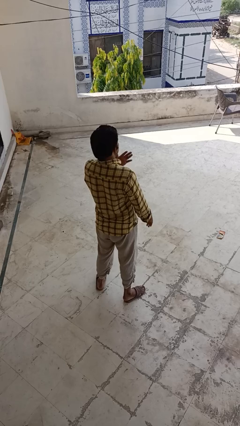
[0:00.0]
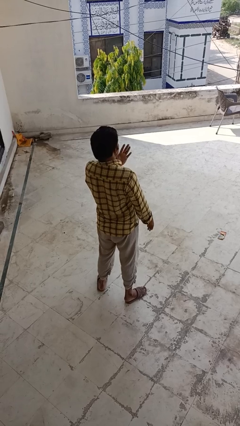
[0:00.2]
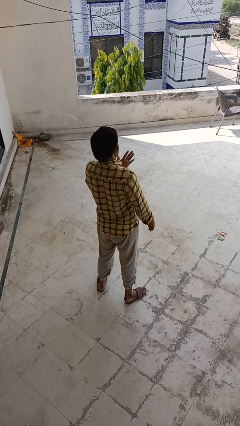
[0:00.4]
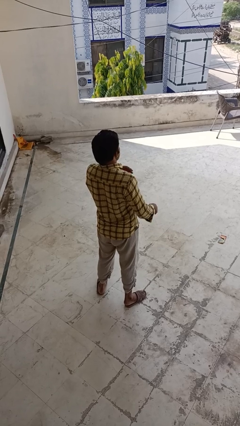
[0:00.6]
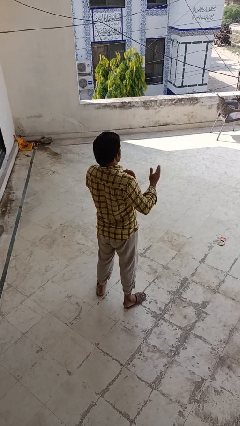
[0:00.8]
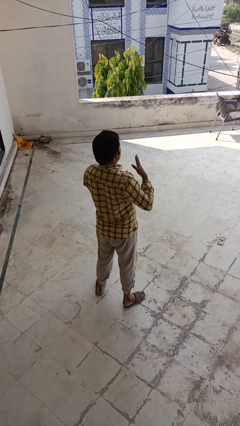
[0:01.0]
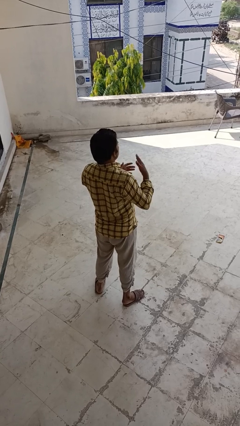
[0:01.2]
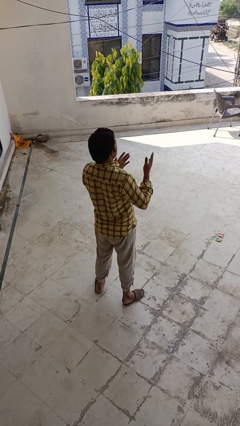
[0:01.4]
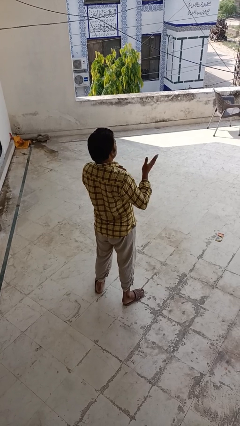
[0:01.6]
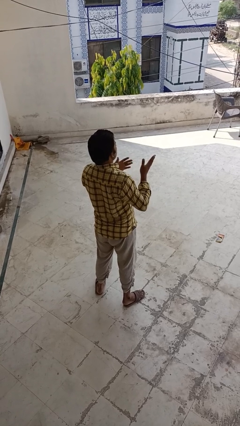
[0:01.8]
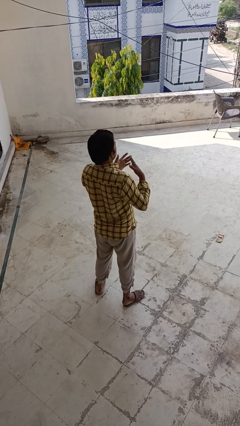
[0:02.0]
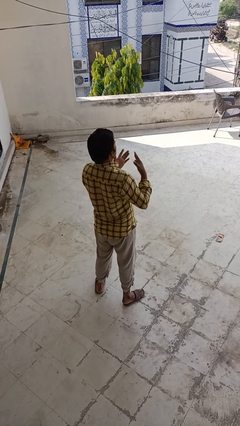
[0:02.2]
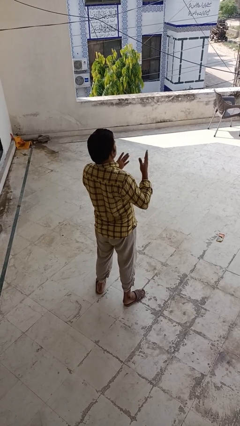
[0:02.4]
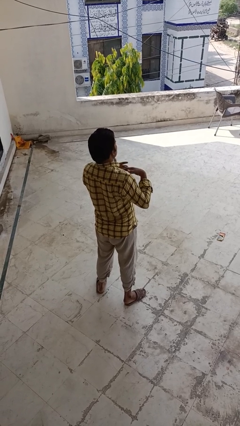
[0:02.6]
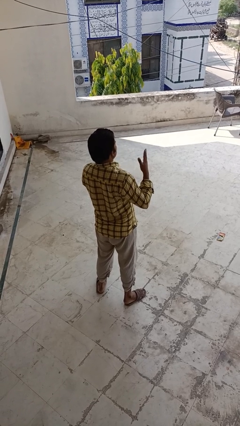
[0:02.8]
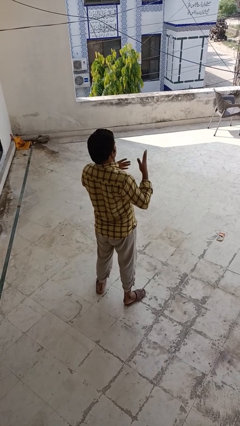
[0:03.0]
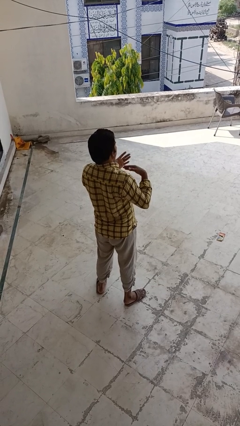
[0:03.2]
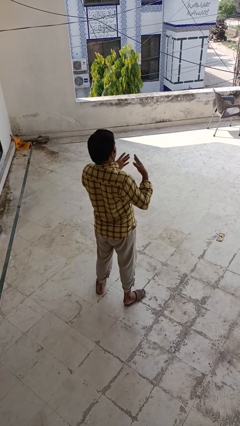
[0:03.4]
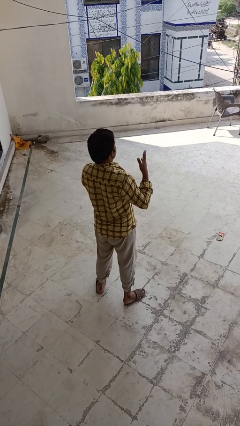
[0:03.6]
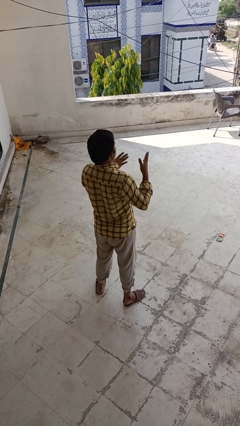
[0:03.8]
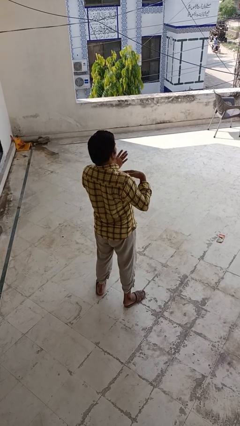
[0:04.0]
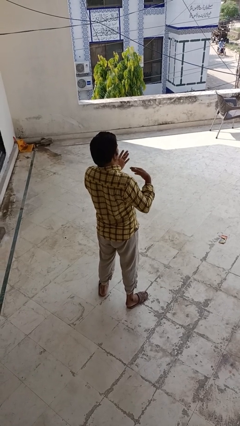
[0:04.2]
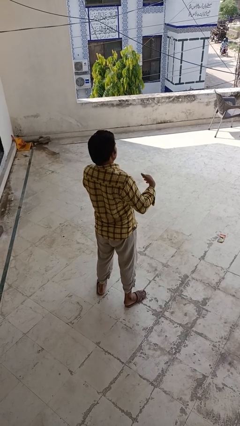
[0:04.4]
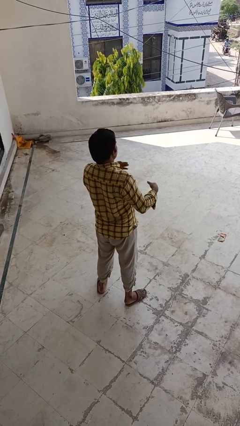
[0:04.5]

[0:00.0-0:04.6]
person drums on chest

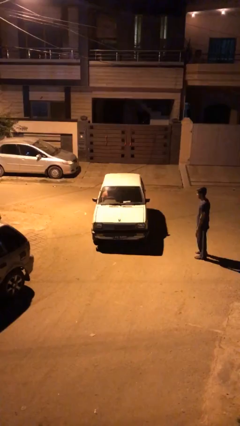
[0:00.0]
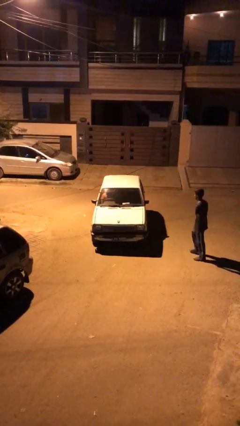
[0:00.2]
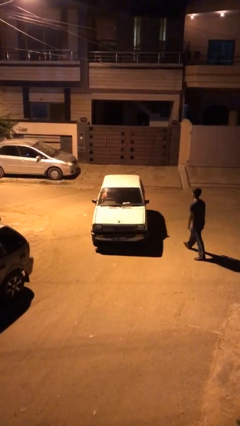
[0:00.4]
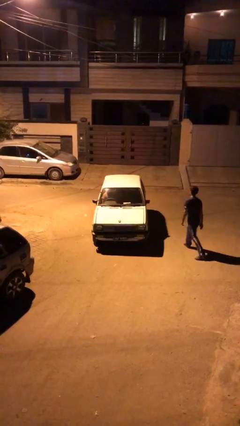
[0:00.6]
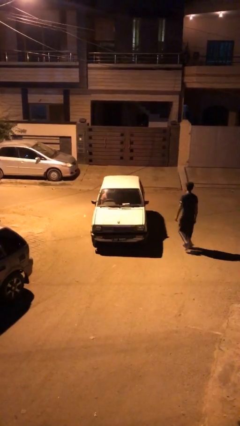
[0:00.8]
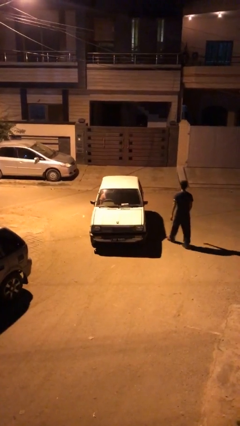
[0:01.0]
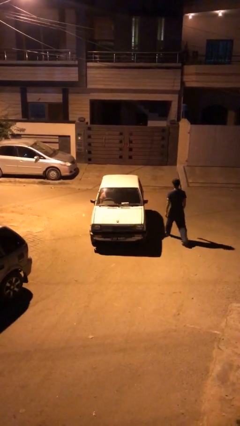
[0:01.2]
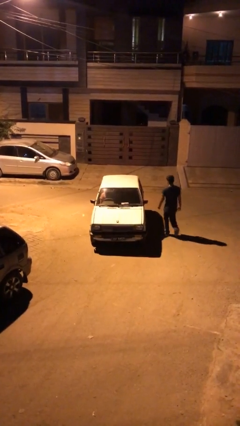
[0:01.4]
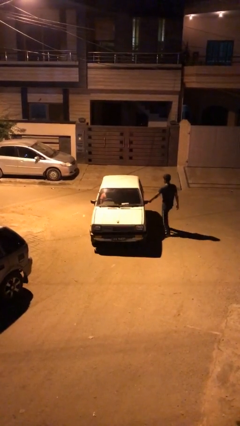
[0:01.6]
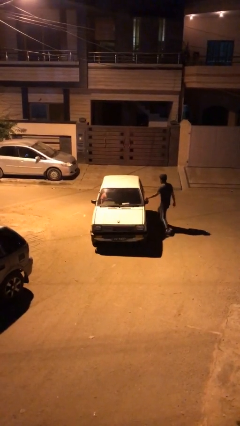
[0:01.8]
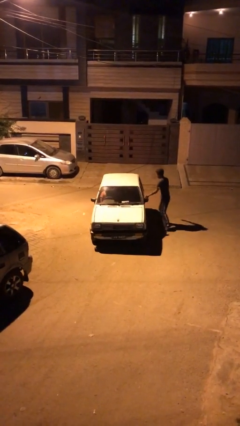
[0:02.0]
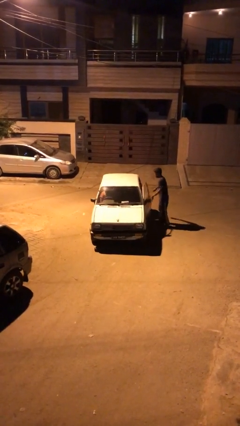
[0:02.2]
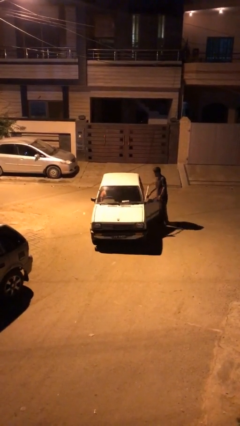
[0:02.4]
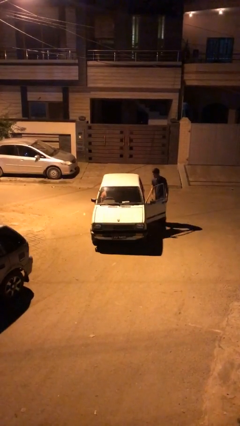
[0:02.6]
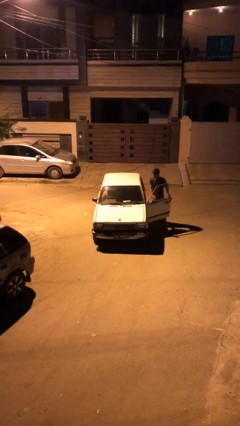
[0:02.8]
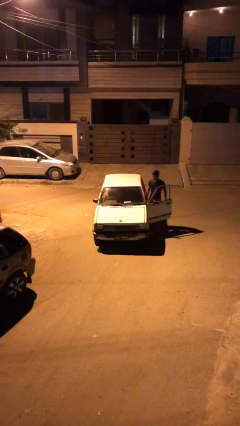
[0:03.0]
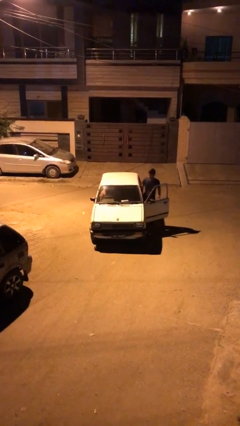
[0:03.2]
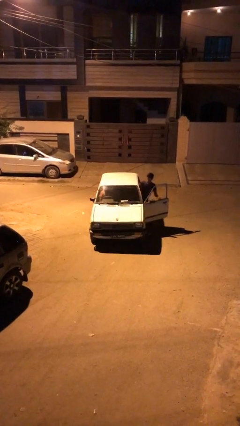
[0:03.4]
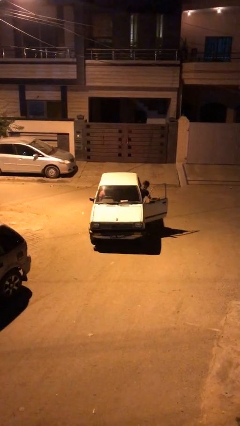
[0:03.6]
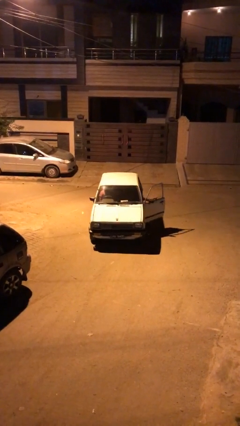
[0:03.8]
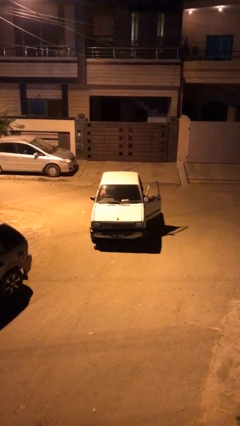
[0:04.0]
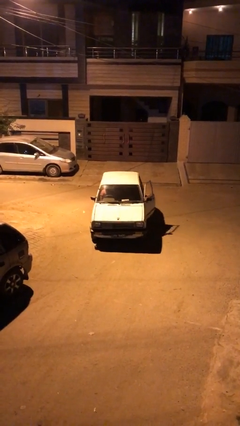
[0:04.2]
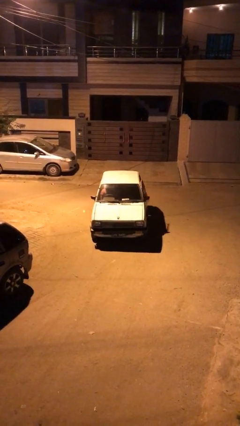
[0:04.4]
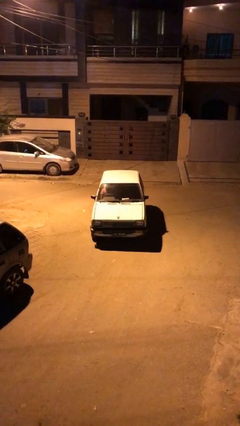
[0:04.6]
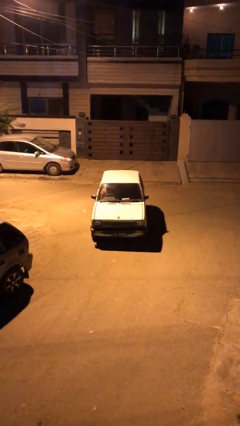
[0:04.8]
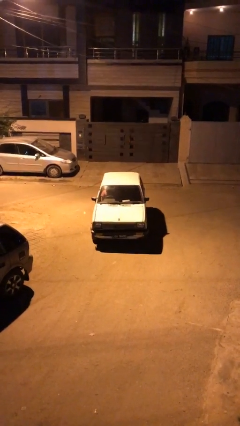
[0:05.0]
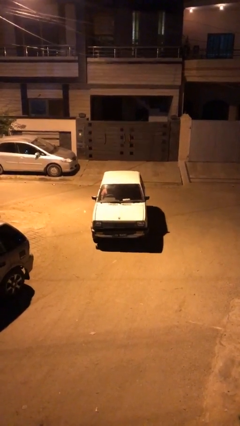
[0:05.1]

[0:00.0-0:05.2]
car picks up person

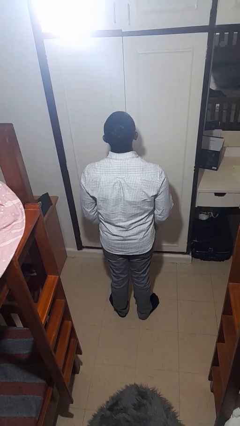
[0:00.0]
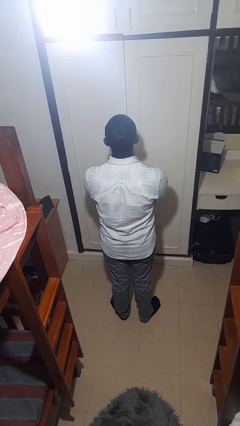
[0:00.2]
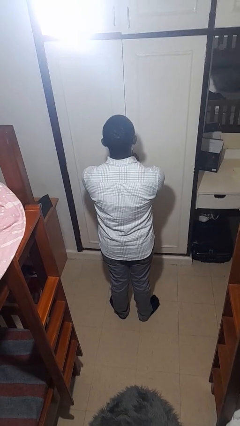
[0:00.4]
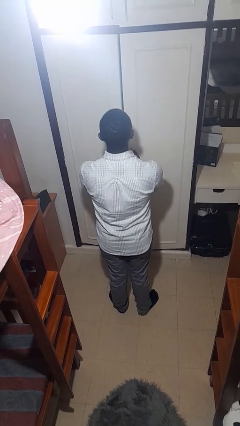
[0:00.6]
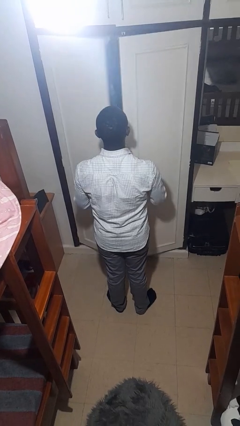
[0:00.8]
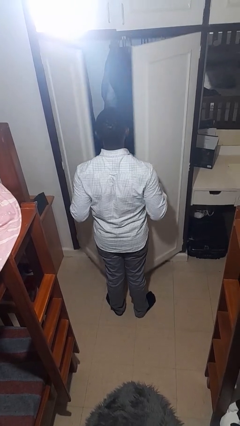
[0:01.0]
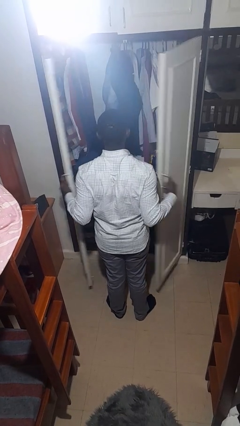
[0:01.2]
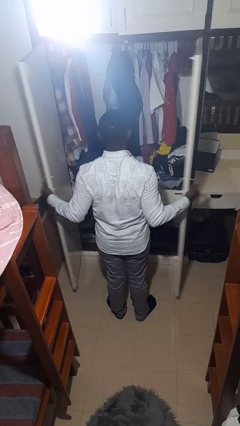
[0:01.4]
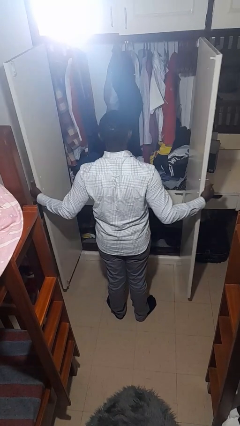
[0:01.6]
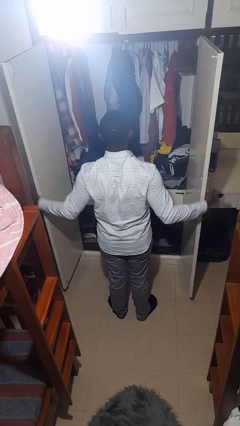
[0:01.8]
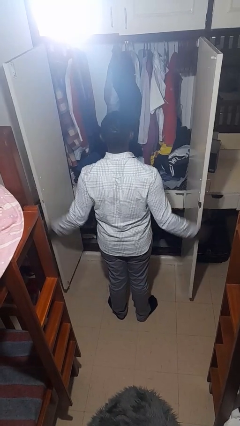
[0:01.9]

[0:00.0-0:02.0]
person opens closet door

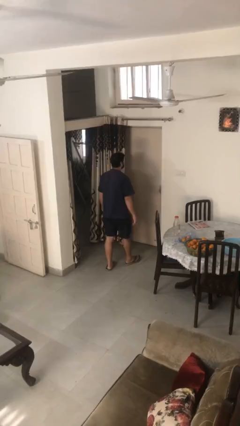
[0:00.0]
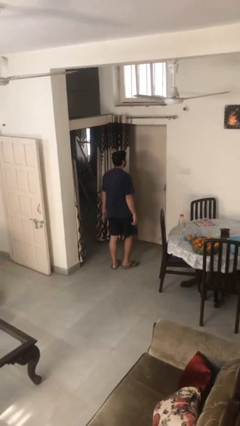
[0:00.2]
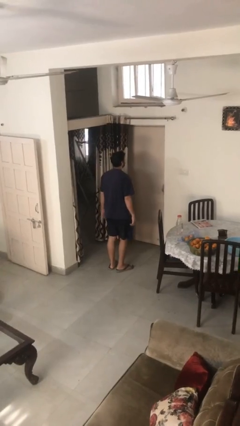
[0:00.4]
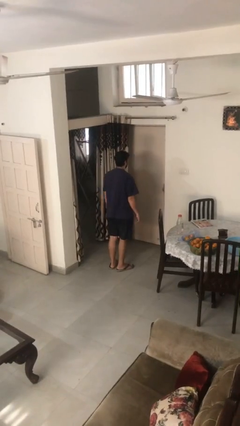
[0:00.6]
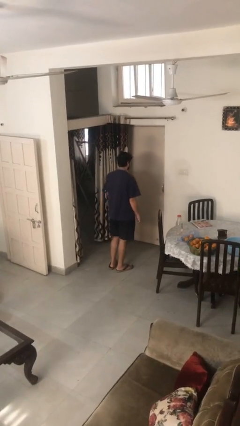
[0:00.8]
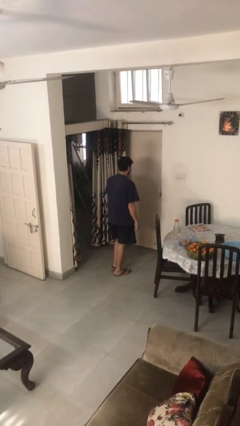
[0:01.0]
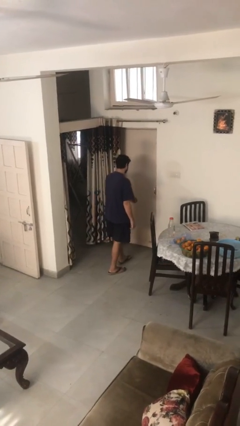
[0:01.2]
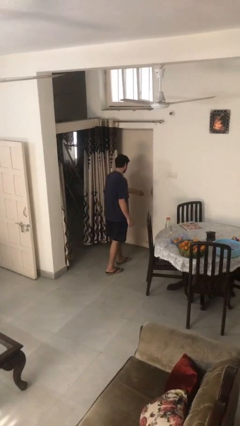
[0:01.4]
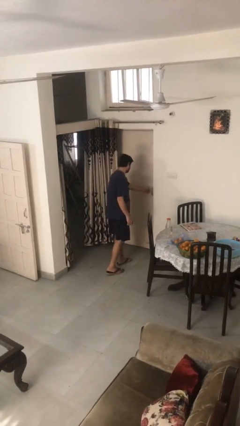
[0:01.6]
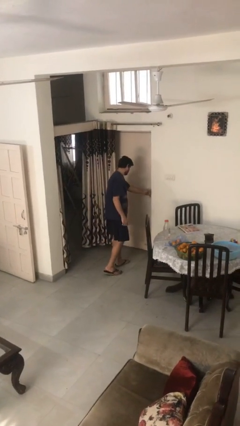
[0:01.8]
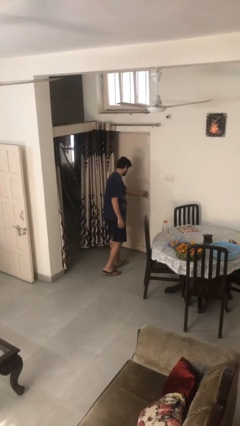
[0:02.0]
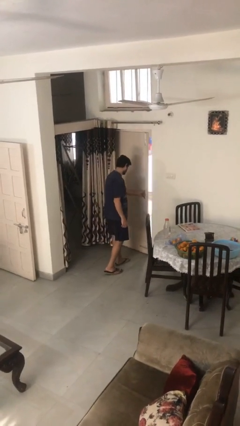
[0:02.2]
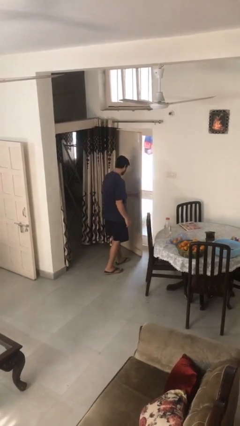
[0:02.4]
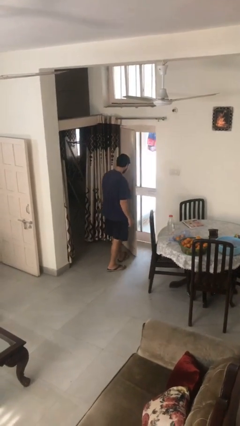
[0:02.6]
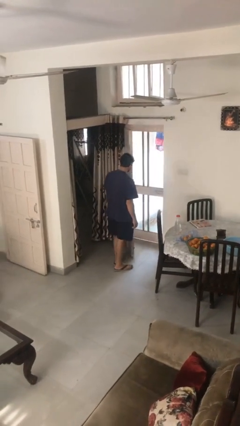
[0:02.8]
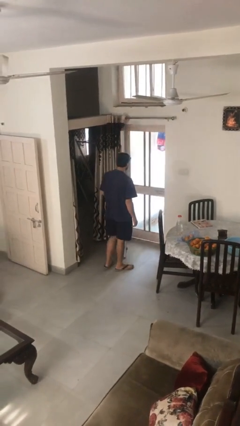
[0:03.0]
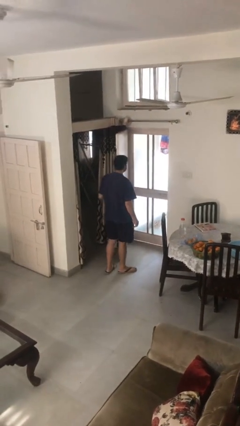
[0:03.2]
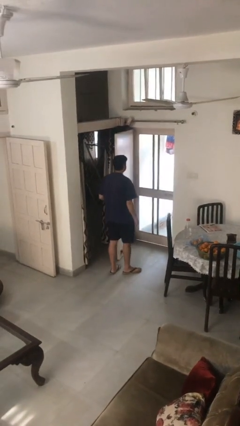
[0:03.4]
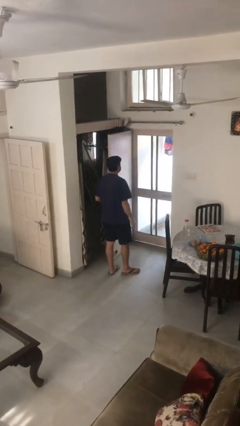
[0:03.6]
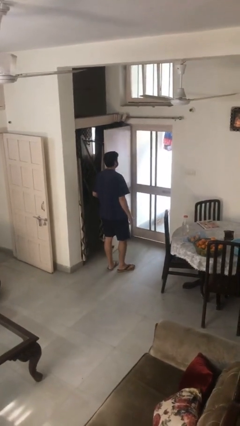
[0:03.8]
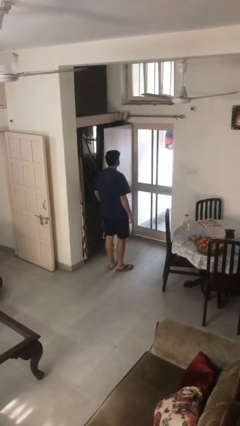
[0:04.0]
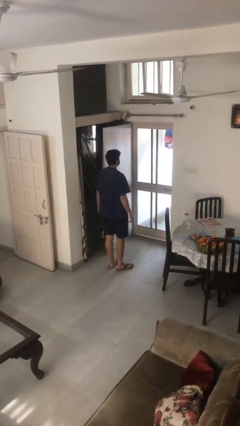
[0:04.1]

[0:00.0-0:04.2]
person opens facility door

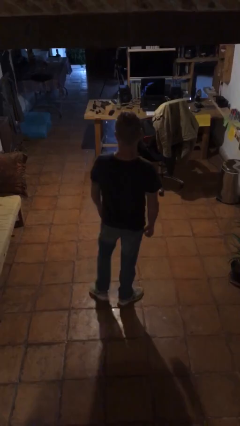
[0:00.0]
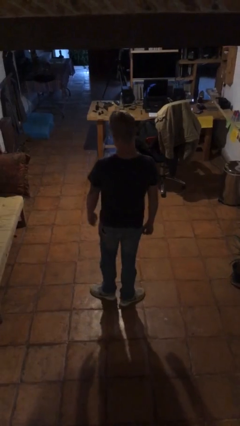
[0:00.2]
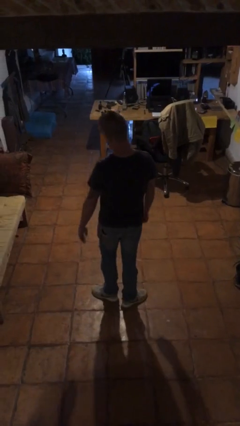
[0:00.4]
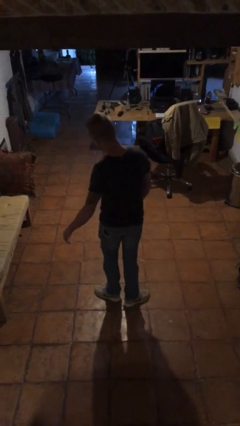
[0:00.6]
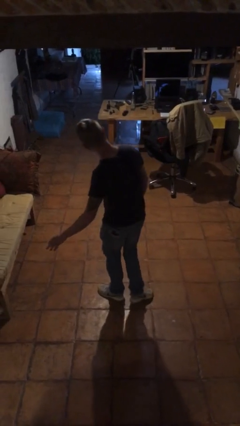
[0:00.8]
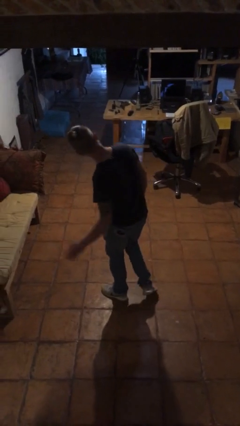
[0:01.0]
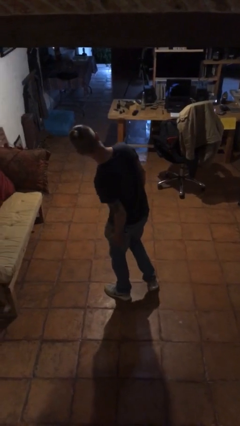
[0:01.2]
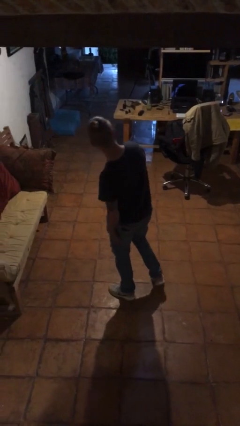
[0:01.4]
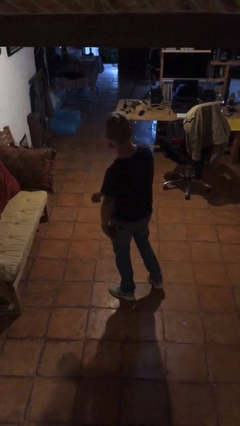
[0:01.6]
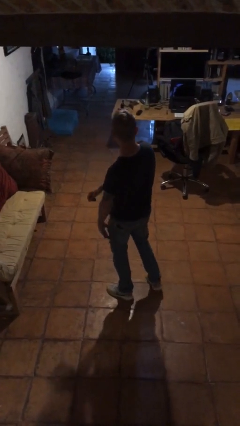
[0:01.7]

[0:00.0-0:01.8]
person slaps hands on thighs
